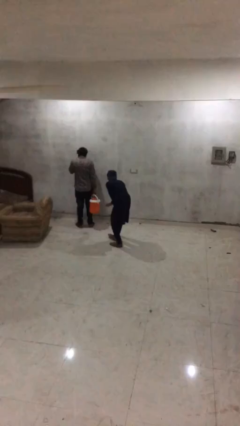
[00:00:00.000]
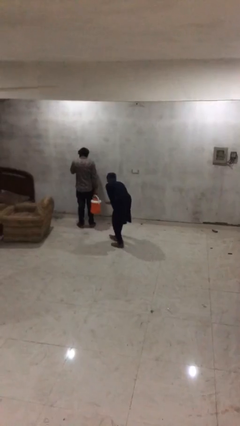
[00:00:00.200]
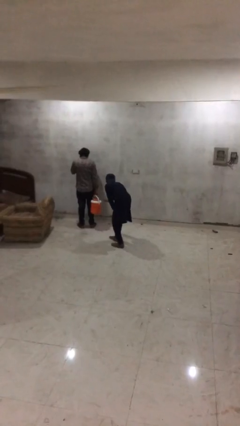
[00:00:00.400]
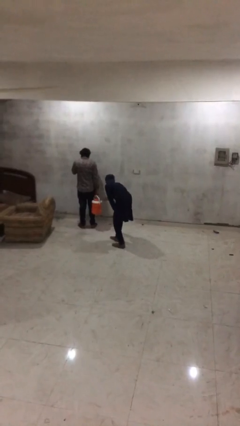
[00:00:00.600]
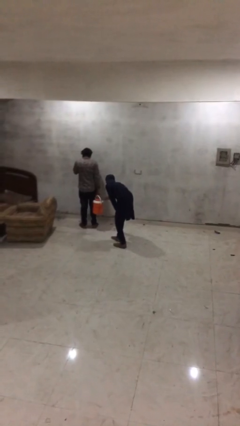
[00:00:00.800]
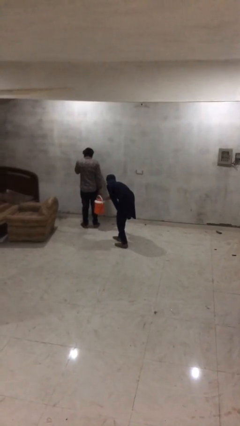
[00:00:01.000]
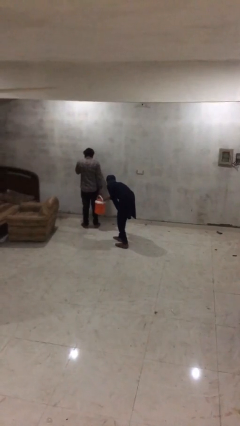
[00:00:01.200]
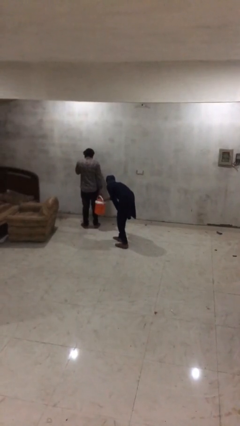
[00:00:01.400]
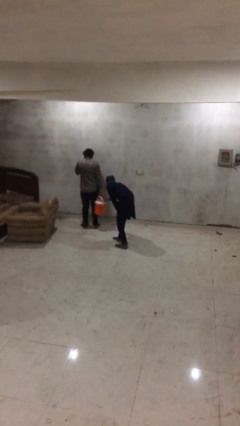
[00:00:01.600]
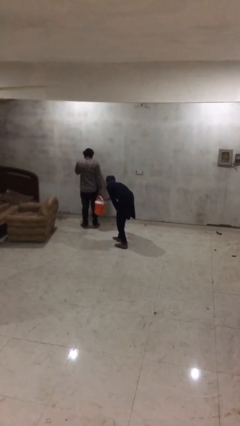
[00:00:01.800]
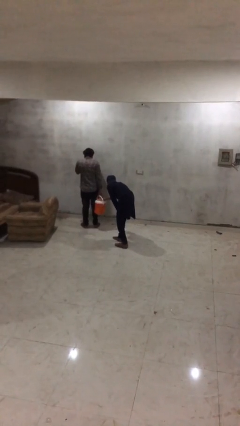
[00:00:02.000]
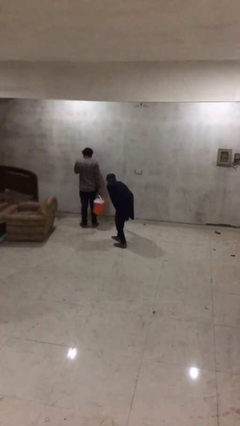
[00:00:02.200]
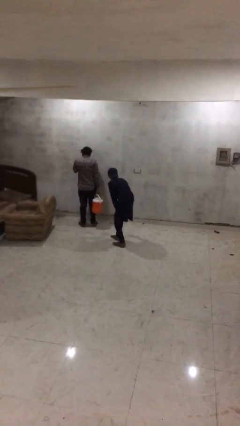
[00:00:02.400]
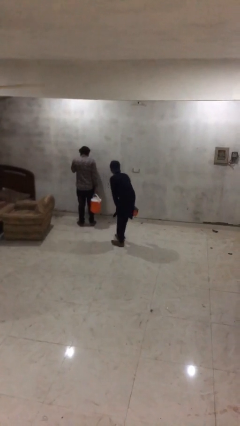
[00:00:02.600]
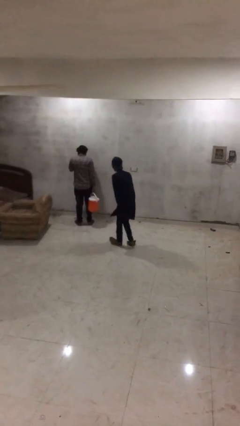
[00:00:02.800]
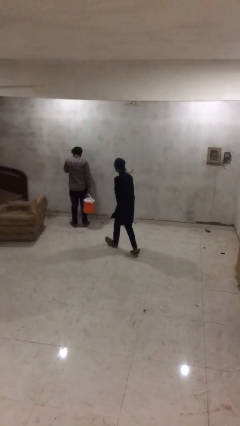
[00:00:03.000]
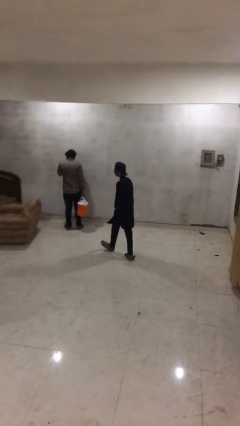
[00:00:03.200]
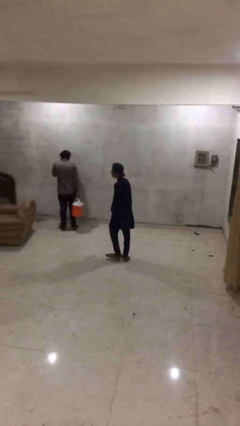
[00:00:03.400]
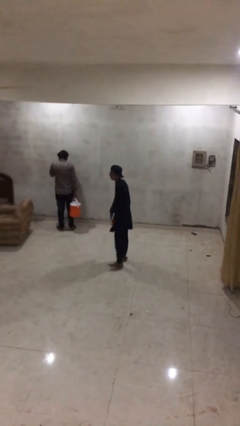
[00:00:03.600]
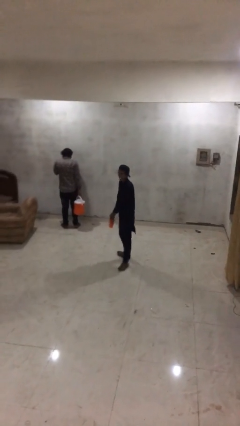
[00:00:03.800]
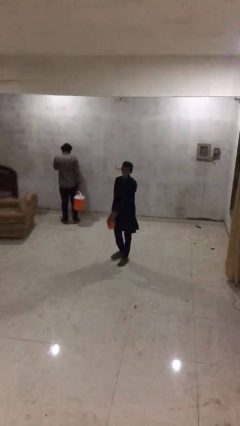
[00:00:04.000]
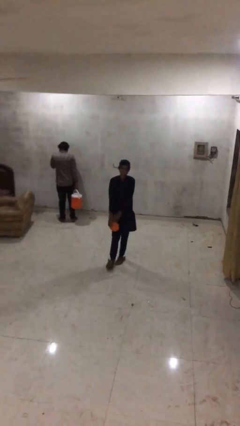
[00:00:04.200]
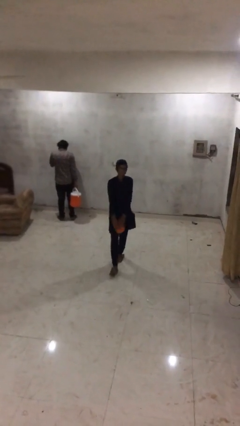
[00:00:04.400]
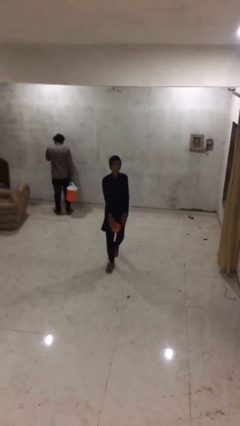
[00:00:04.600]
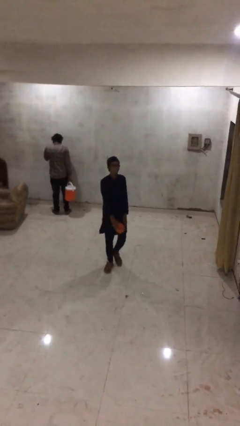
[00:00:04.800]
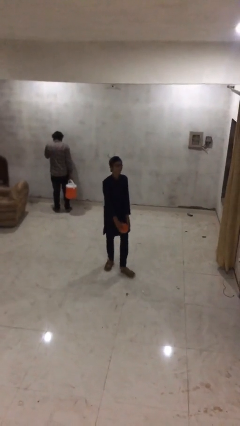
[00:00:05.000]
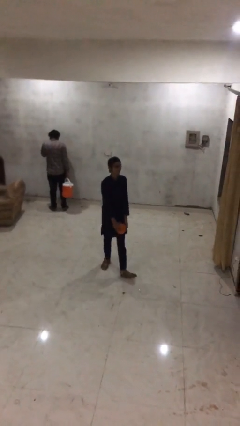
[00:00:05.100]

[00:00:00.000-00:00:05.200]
person steals object from person

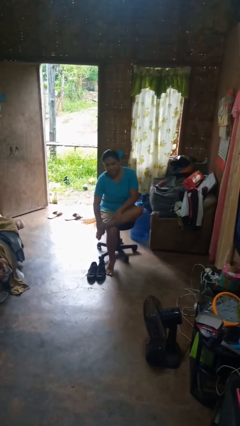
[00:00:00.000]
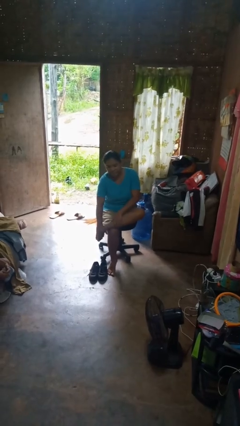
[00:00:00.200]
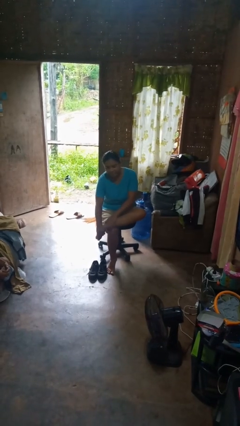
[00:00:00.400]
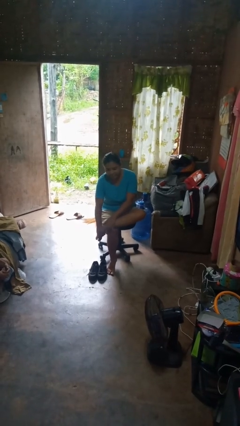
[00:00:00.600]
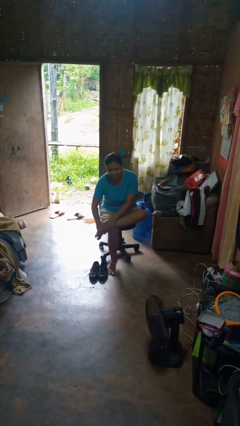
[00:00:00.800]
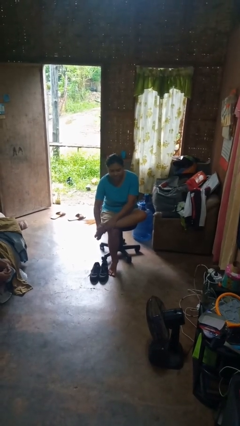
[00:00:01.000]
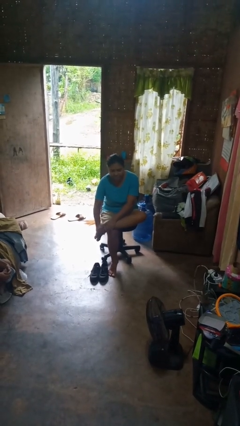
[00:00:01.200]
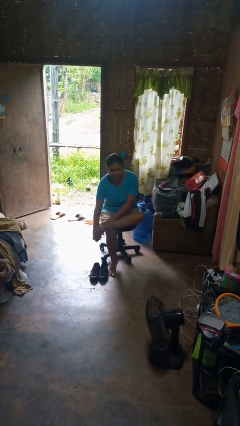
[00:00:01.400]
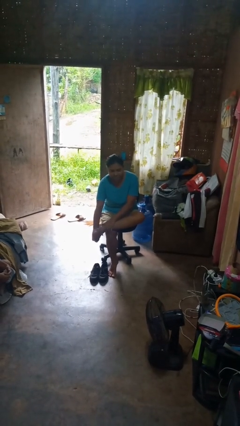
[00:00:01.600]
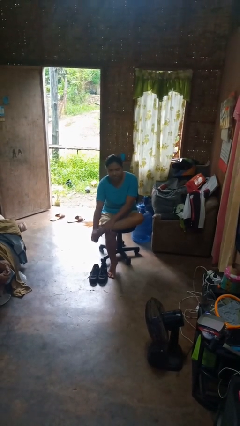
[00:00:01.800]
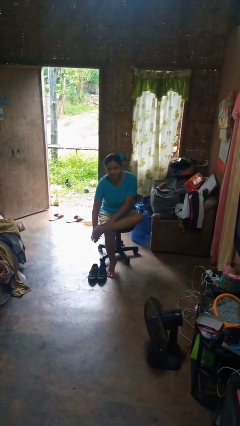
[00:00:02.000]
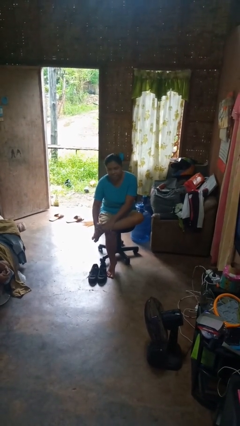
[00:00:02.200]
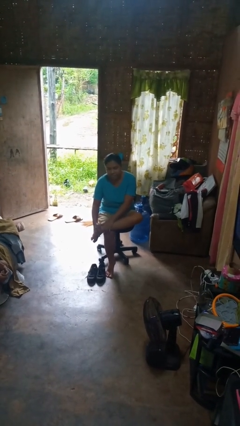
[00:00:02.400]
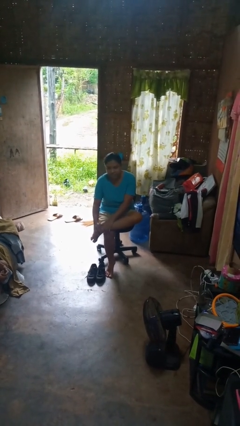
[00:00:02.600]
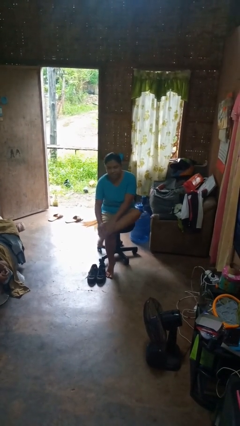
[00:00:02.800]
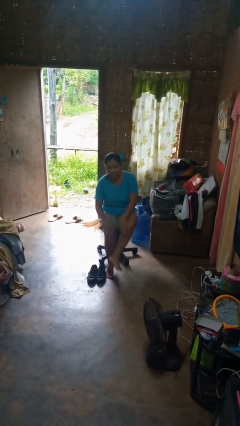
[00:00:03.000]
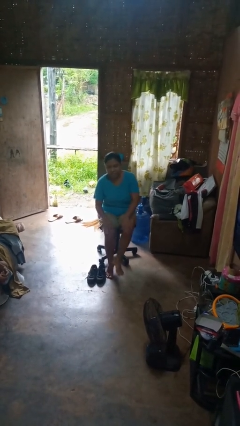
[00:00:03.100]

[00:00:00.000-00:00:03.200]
person rubs foot

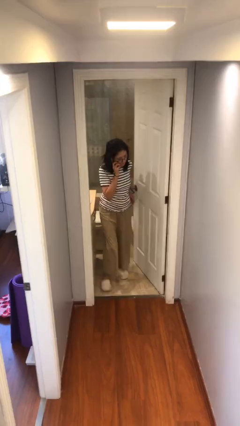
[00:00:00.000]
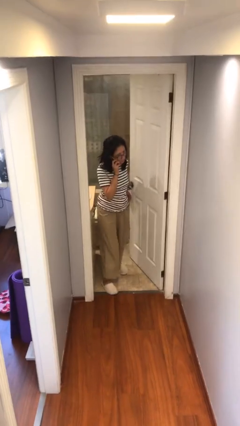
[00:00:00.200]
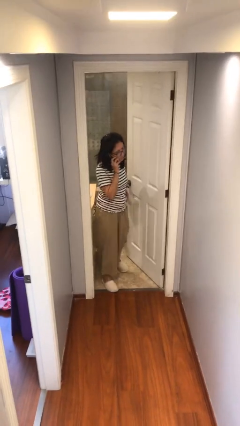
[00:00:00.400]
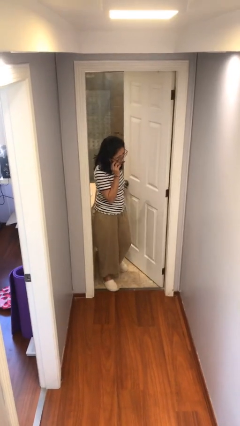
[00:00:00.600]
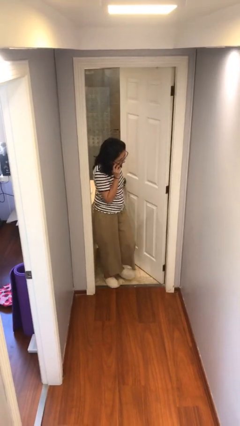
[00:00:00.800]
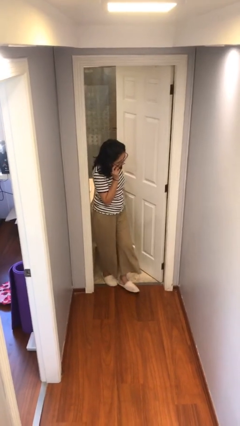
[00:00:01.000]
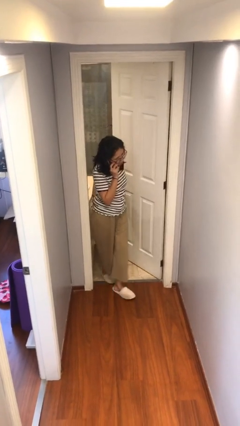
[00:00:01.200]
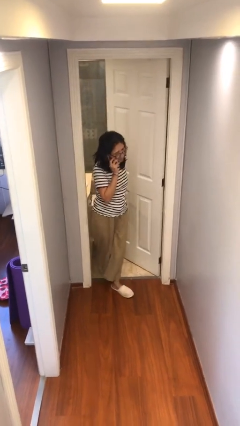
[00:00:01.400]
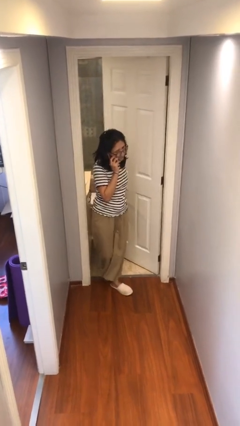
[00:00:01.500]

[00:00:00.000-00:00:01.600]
person enters scene through structure

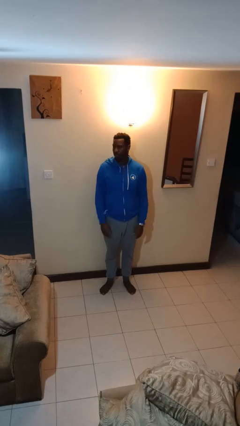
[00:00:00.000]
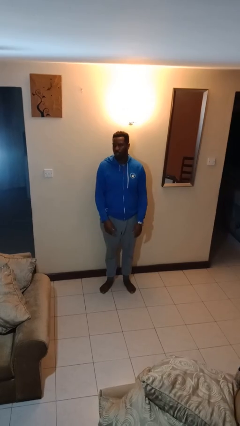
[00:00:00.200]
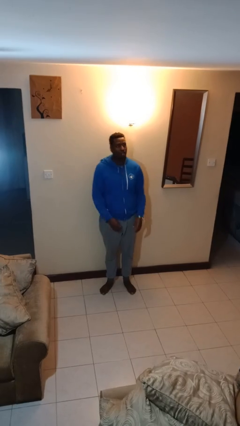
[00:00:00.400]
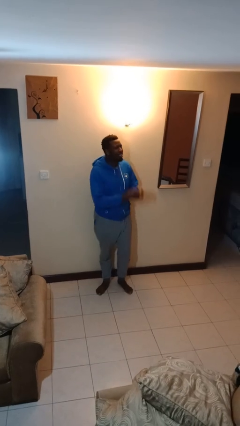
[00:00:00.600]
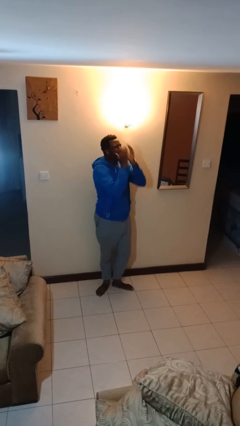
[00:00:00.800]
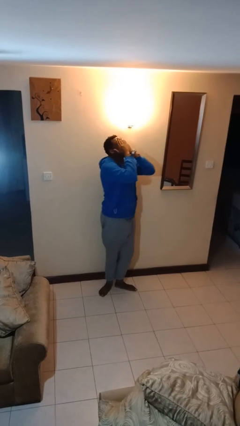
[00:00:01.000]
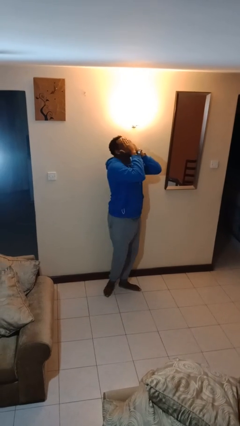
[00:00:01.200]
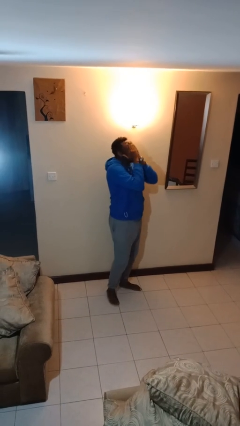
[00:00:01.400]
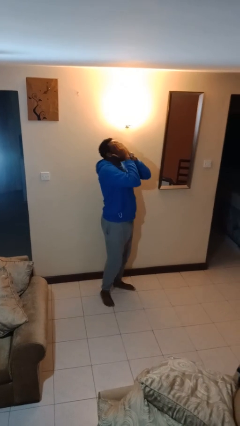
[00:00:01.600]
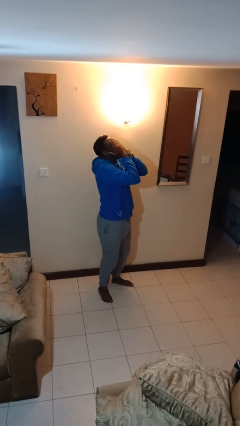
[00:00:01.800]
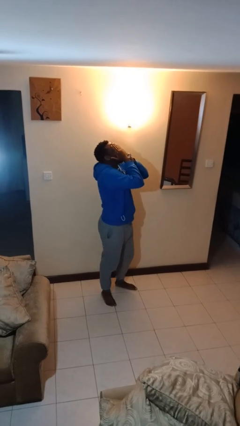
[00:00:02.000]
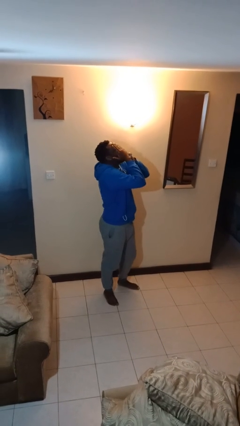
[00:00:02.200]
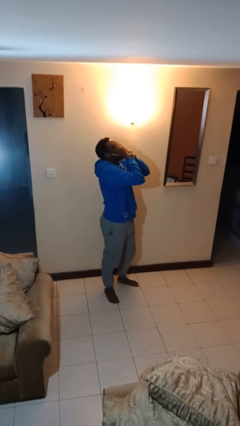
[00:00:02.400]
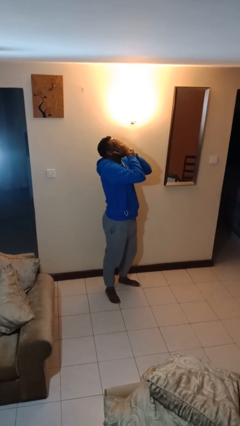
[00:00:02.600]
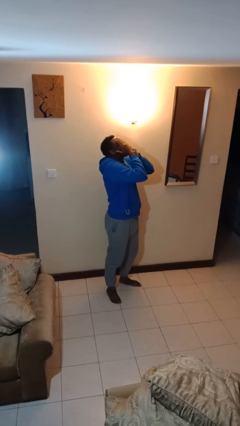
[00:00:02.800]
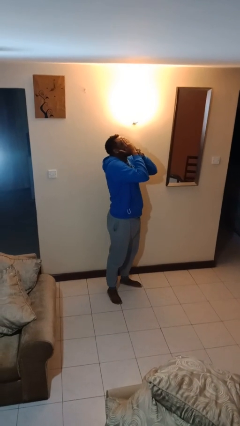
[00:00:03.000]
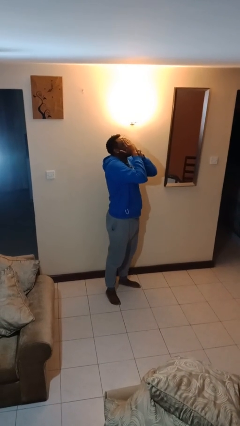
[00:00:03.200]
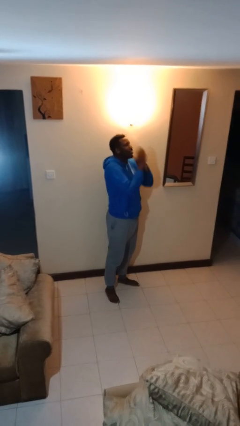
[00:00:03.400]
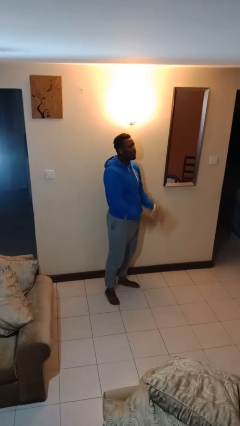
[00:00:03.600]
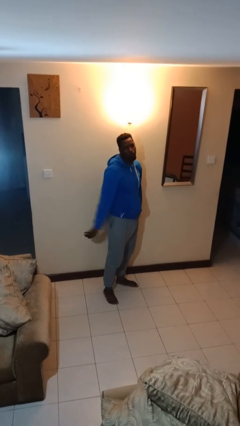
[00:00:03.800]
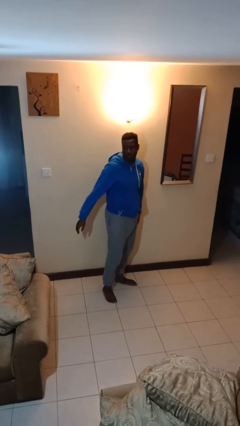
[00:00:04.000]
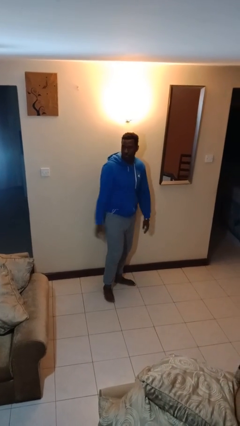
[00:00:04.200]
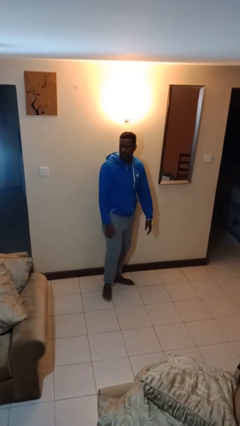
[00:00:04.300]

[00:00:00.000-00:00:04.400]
person covers face with hands

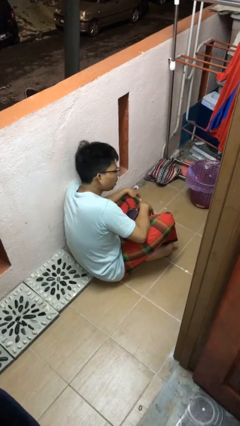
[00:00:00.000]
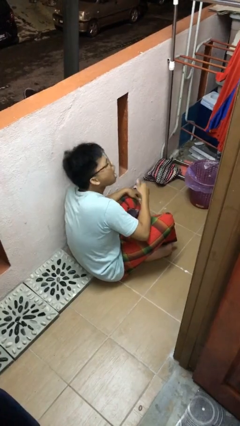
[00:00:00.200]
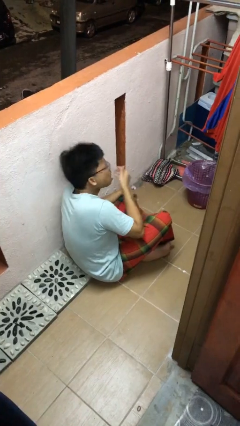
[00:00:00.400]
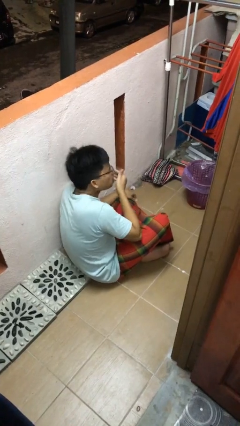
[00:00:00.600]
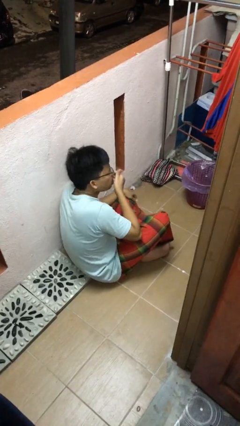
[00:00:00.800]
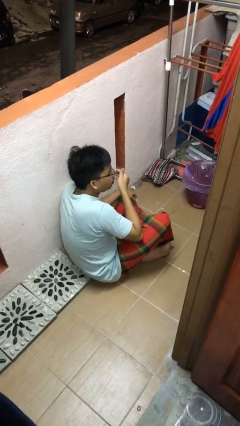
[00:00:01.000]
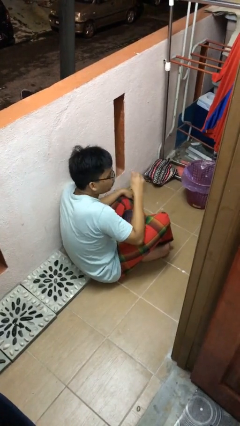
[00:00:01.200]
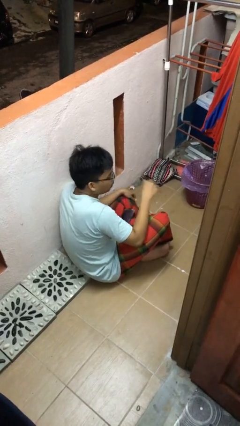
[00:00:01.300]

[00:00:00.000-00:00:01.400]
person sneezes into hand

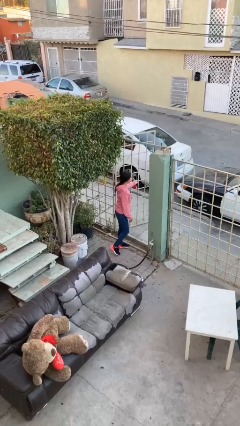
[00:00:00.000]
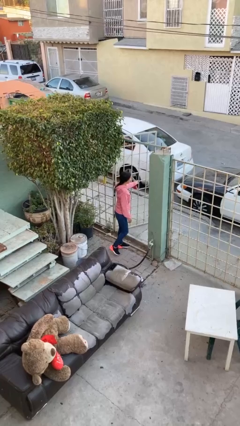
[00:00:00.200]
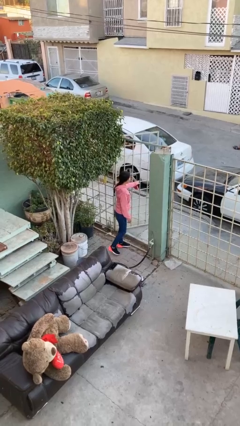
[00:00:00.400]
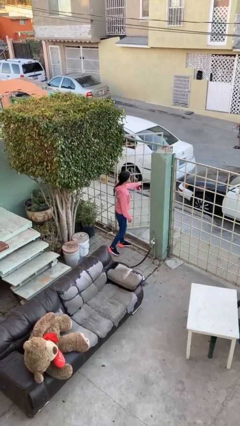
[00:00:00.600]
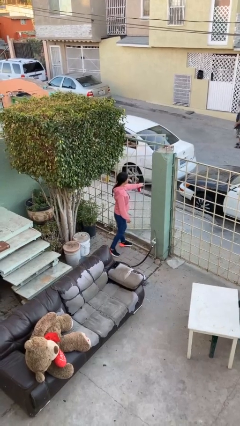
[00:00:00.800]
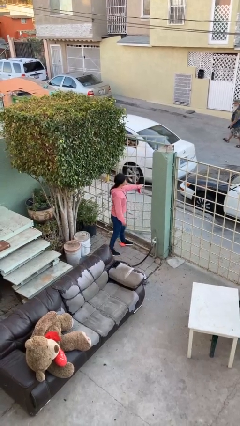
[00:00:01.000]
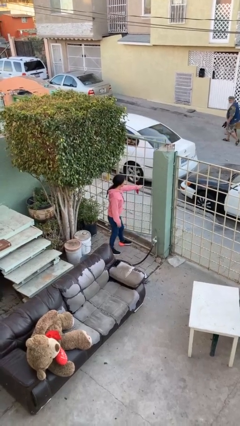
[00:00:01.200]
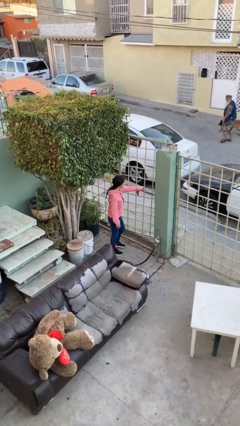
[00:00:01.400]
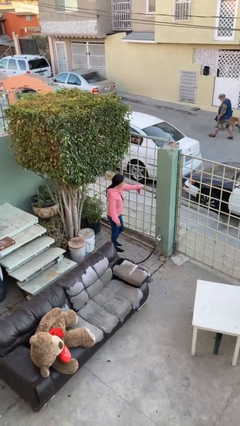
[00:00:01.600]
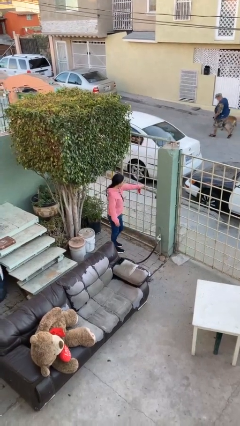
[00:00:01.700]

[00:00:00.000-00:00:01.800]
person closes facility door
